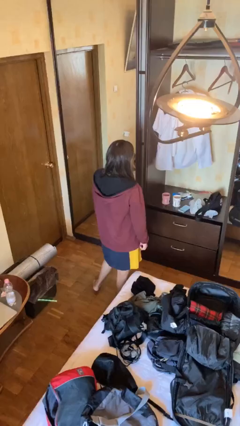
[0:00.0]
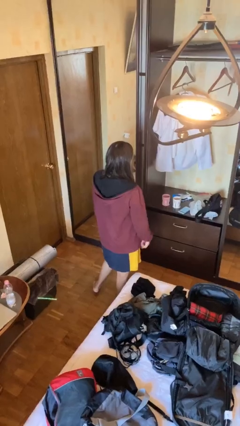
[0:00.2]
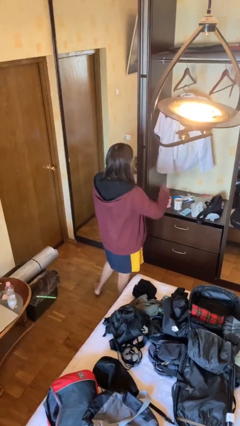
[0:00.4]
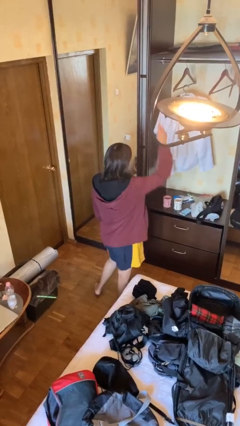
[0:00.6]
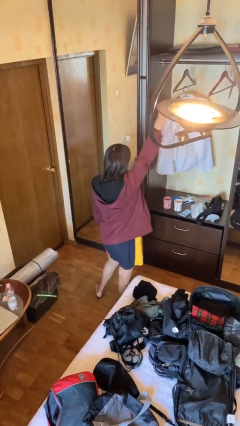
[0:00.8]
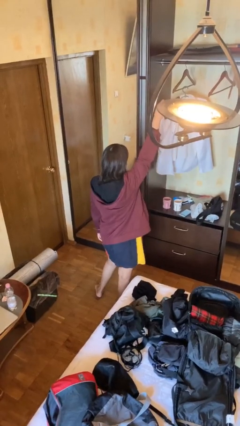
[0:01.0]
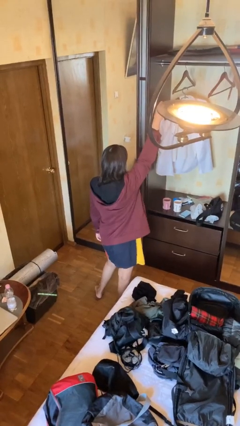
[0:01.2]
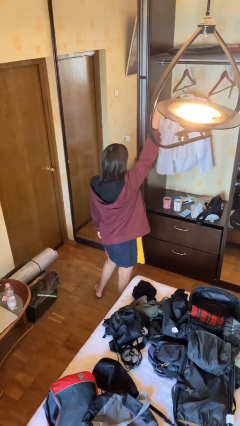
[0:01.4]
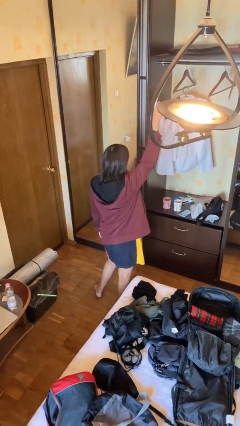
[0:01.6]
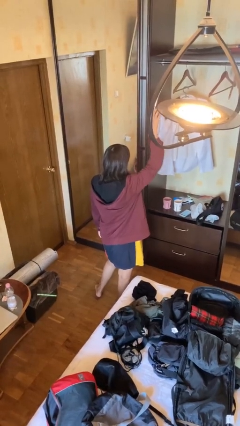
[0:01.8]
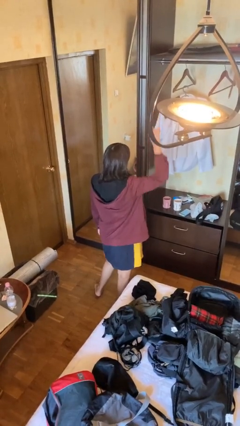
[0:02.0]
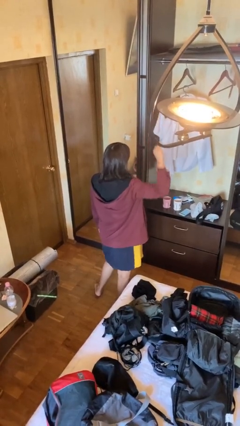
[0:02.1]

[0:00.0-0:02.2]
person gestures raise hand

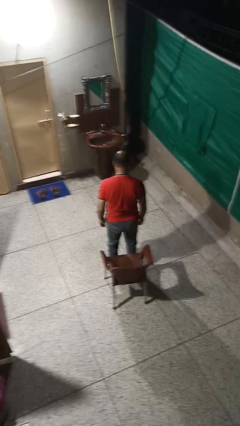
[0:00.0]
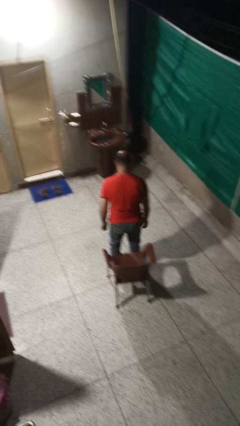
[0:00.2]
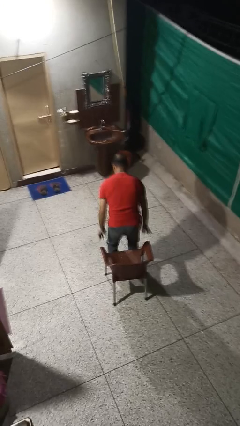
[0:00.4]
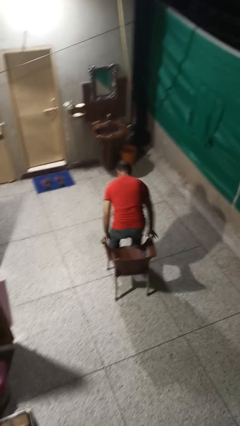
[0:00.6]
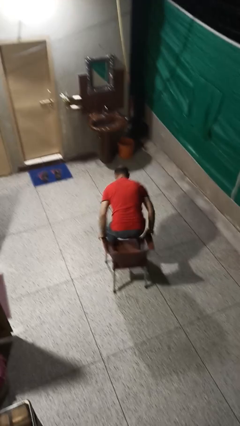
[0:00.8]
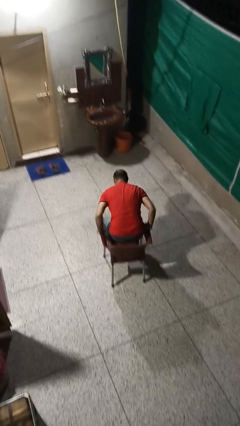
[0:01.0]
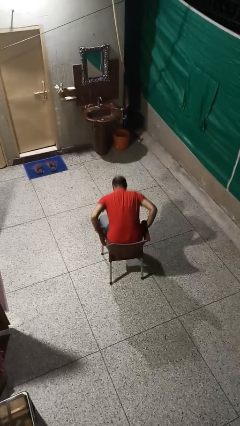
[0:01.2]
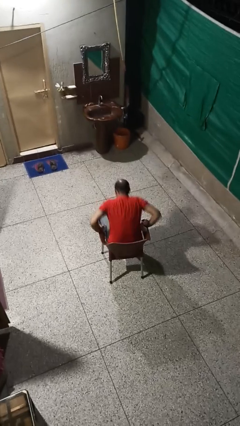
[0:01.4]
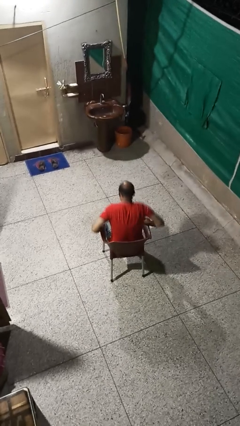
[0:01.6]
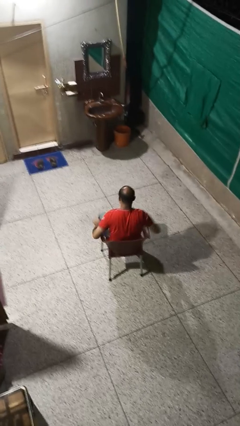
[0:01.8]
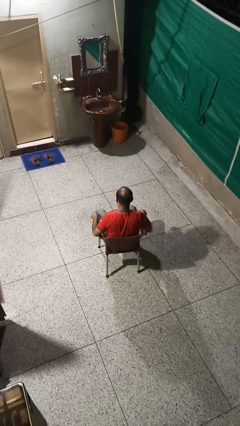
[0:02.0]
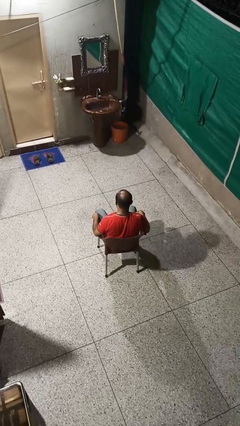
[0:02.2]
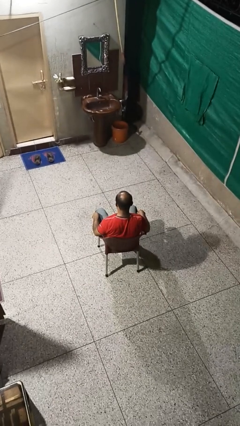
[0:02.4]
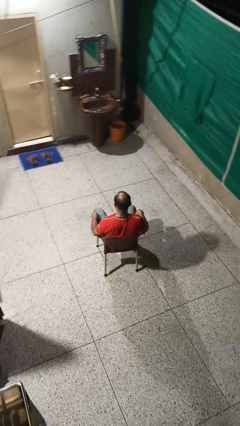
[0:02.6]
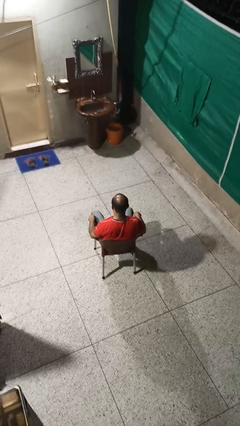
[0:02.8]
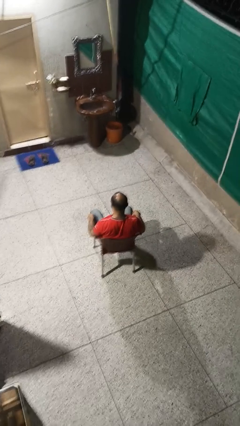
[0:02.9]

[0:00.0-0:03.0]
person sits down

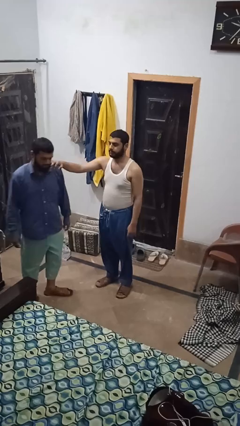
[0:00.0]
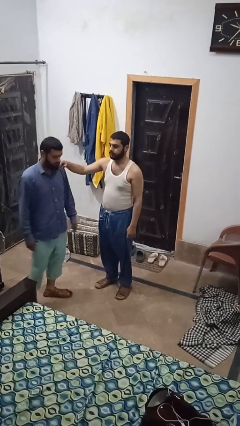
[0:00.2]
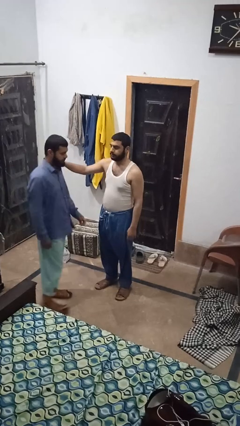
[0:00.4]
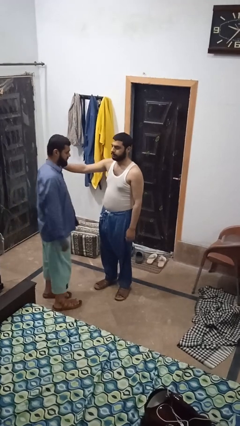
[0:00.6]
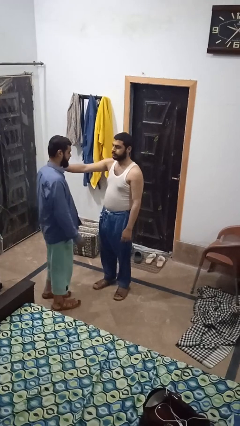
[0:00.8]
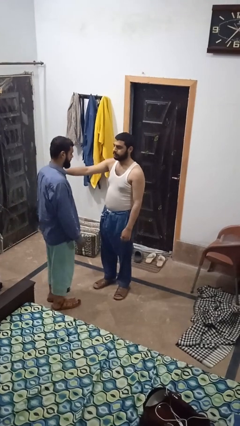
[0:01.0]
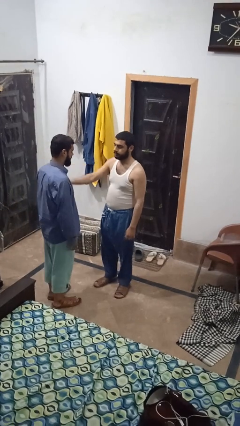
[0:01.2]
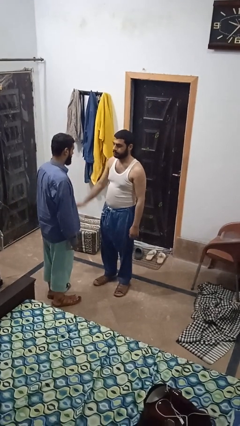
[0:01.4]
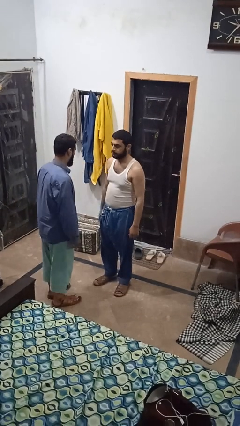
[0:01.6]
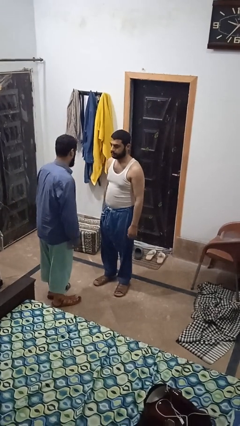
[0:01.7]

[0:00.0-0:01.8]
person spins person around

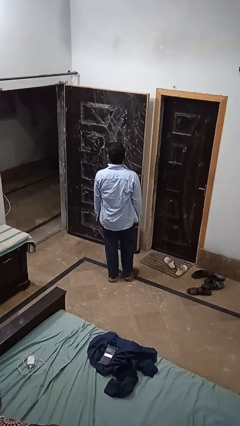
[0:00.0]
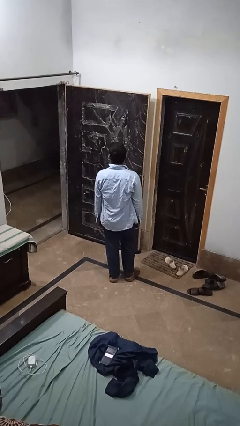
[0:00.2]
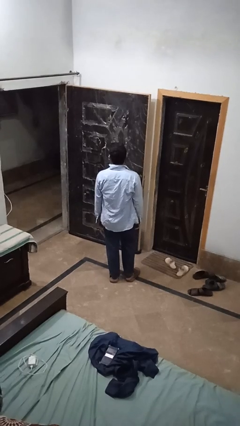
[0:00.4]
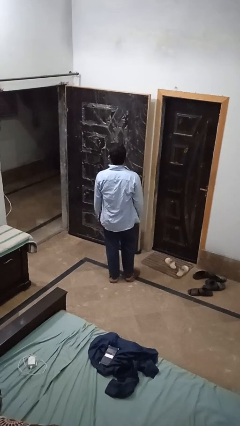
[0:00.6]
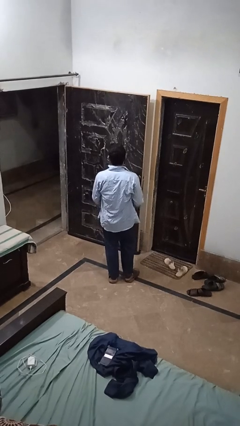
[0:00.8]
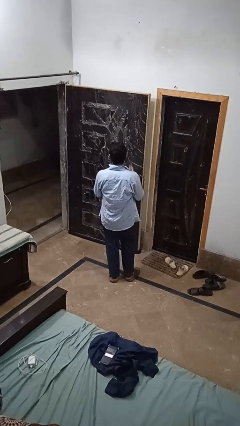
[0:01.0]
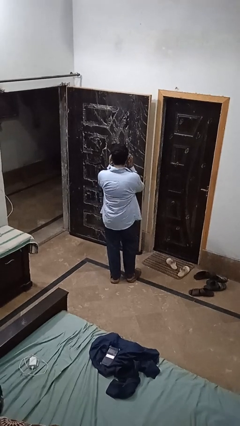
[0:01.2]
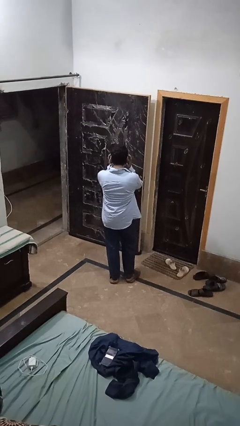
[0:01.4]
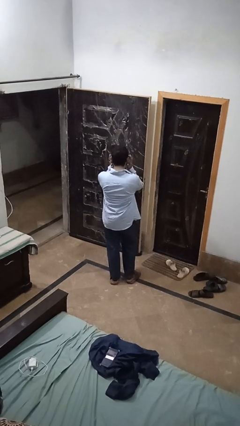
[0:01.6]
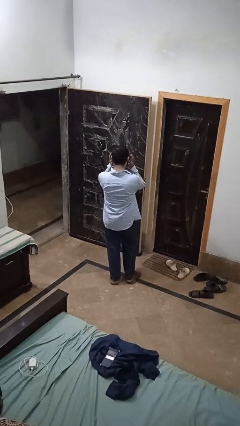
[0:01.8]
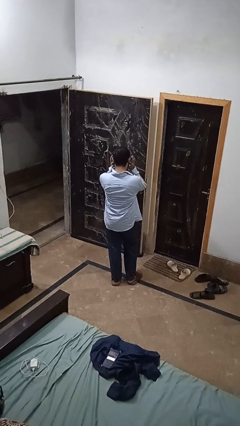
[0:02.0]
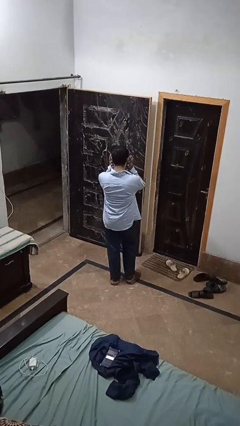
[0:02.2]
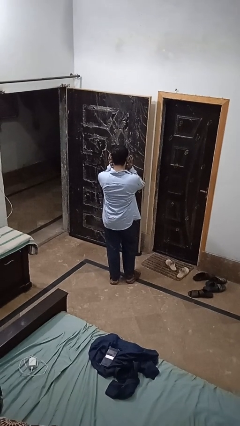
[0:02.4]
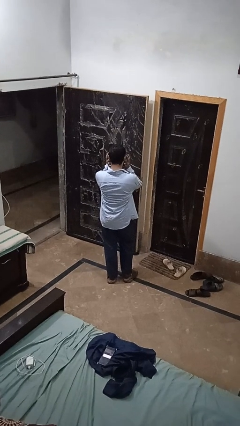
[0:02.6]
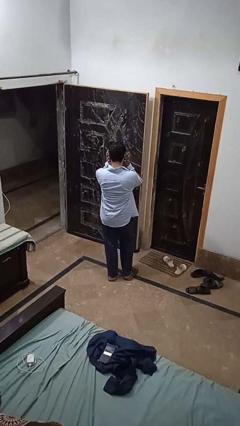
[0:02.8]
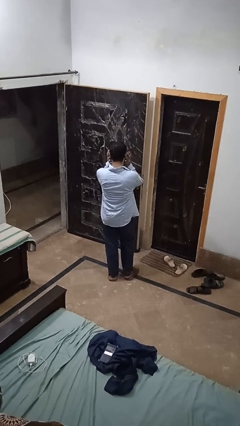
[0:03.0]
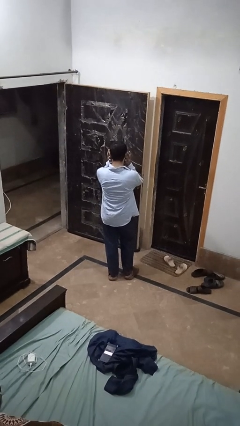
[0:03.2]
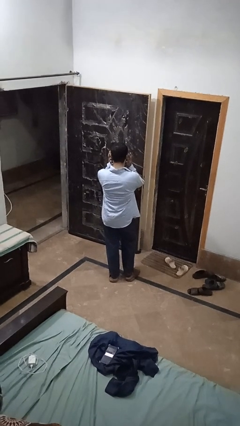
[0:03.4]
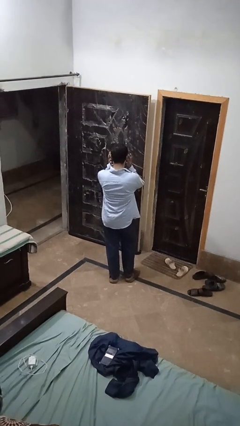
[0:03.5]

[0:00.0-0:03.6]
person puts fingers in ear

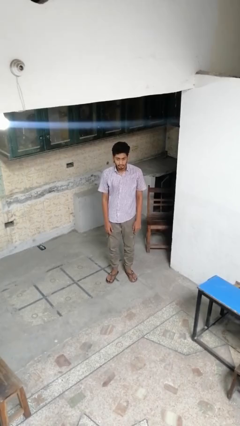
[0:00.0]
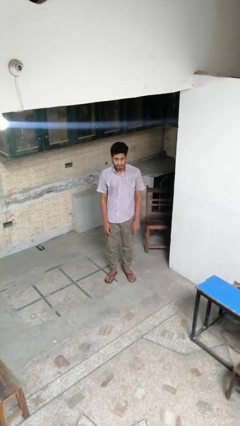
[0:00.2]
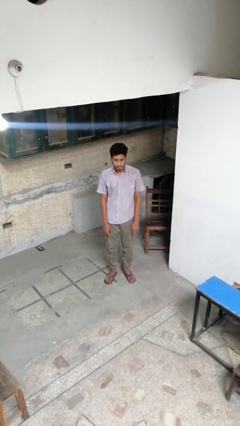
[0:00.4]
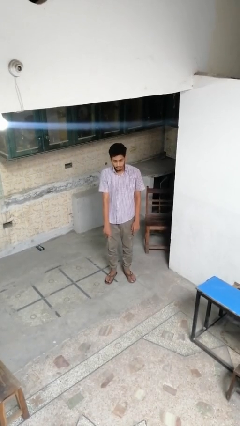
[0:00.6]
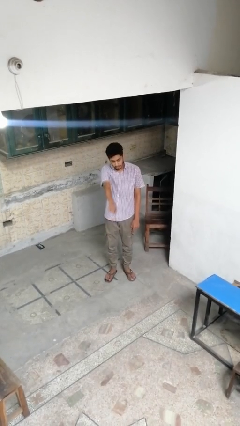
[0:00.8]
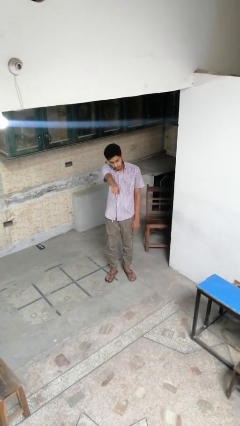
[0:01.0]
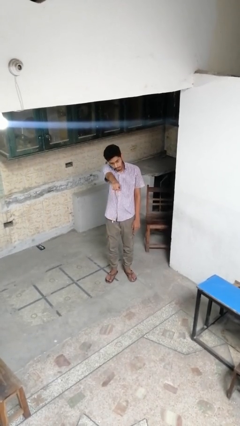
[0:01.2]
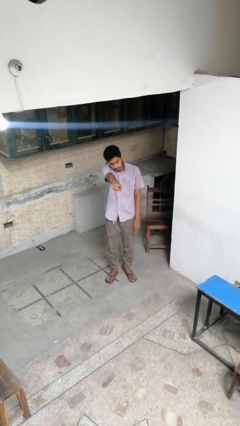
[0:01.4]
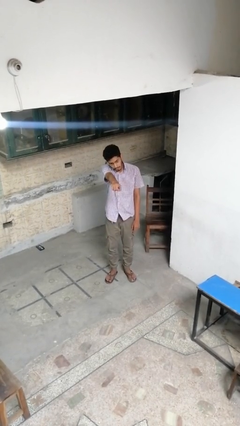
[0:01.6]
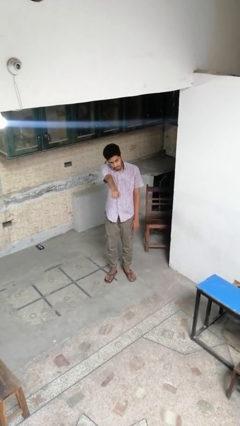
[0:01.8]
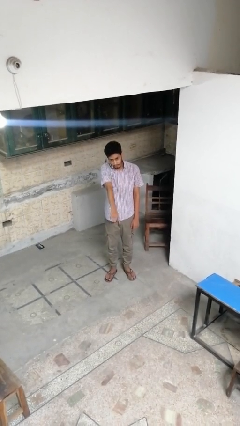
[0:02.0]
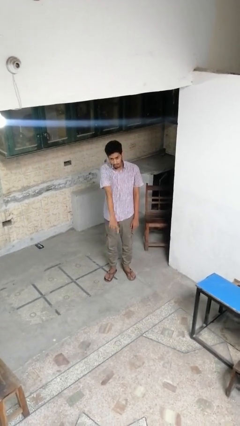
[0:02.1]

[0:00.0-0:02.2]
person points at person

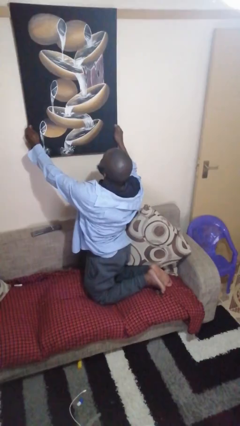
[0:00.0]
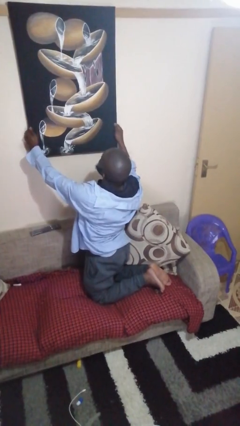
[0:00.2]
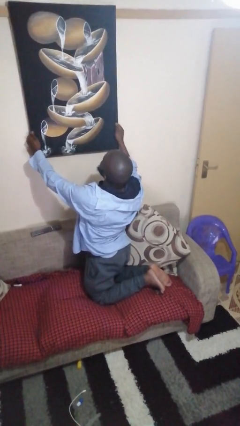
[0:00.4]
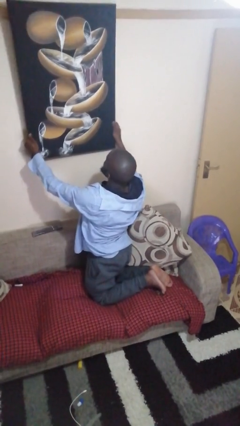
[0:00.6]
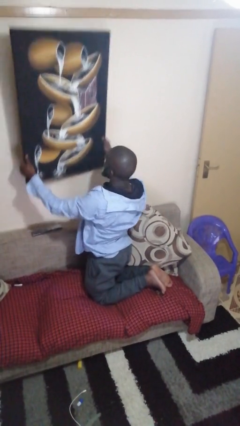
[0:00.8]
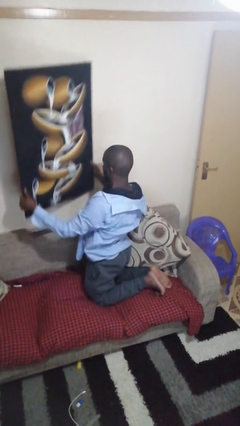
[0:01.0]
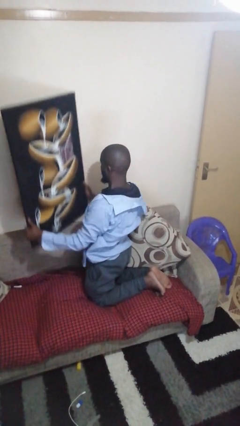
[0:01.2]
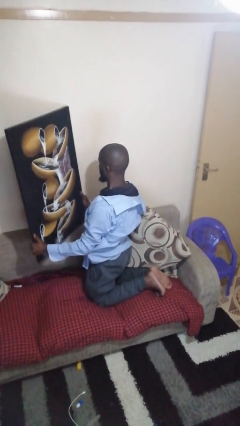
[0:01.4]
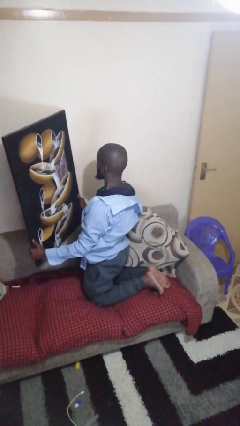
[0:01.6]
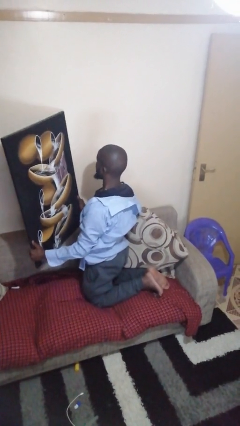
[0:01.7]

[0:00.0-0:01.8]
person takes down picture frame

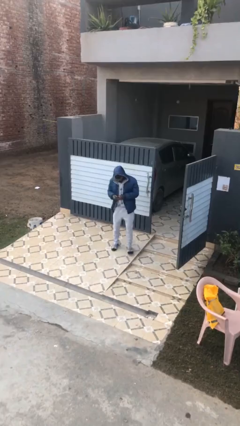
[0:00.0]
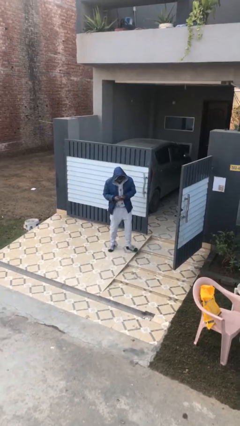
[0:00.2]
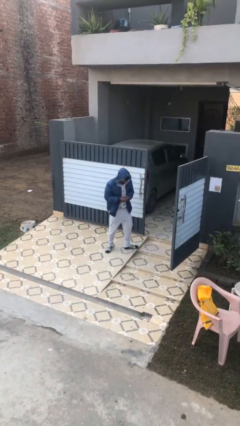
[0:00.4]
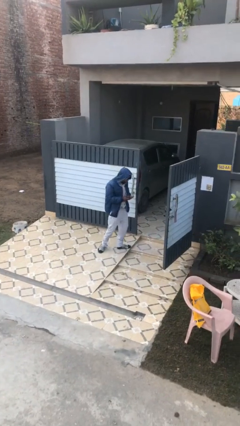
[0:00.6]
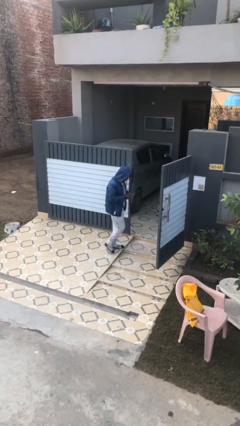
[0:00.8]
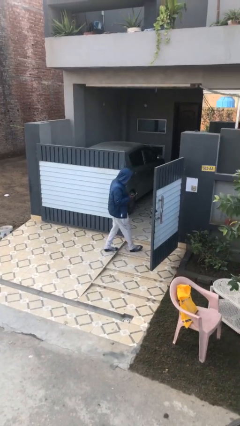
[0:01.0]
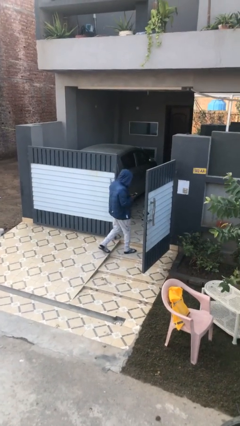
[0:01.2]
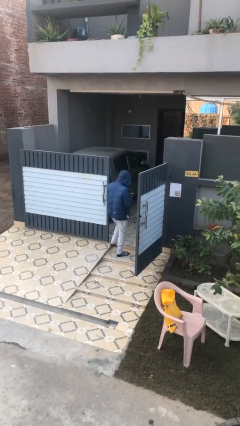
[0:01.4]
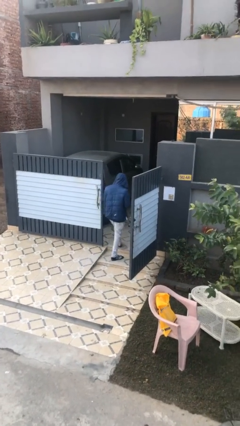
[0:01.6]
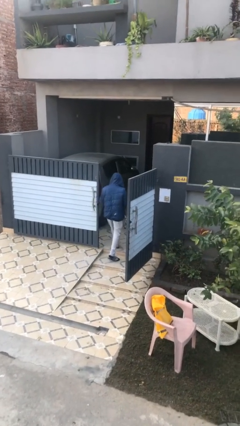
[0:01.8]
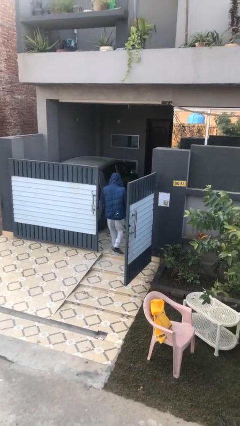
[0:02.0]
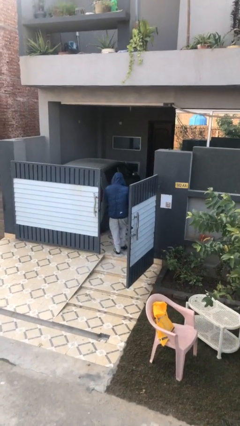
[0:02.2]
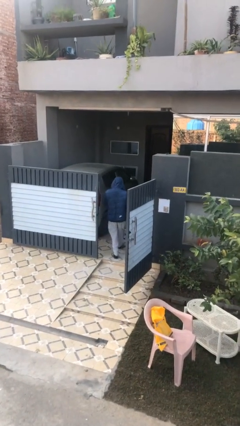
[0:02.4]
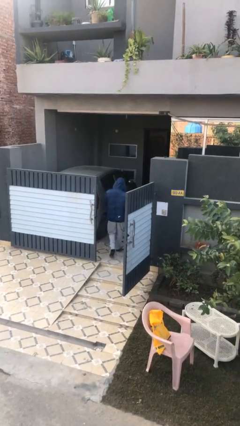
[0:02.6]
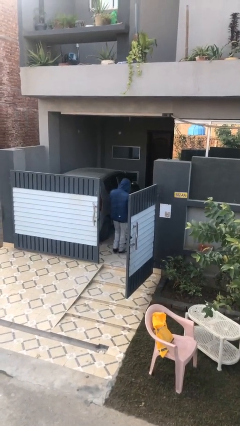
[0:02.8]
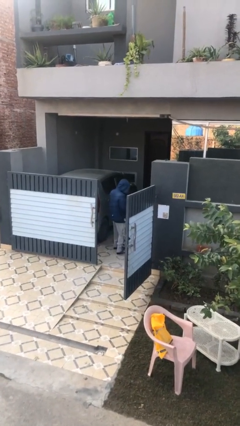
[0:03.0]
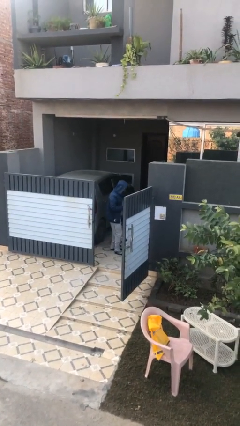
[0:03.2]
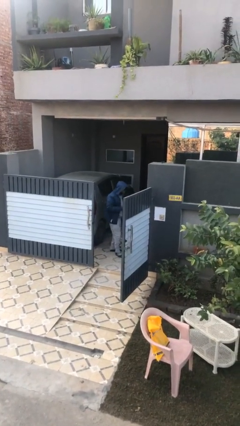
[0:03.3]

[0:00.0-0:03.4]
person exits scene through structure
